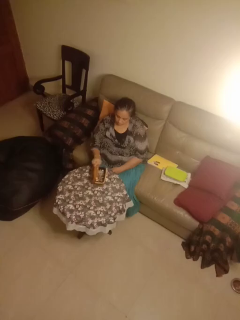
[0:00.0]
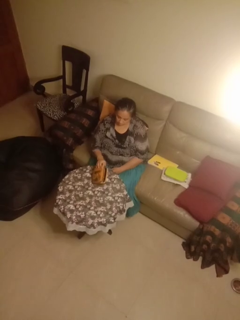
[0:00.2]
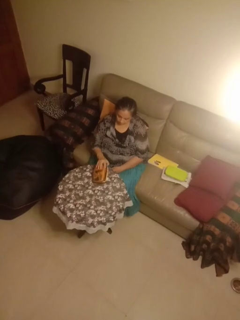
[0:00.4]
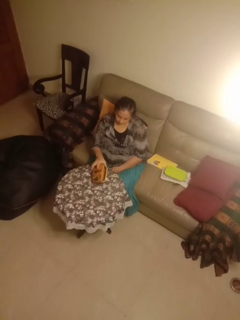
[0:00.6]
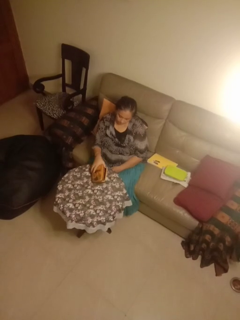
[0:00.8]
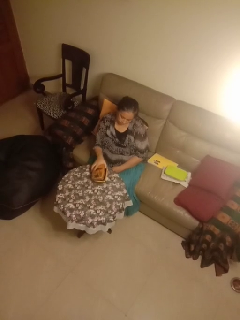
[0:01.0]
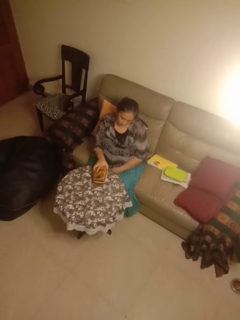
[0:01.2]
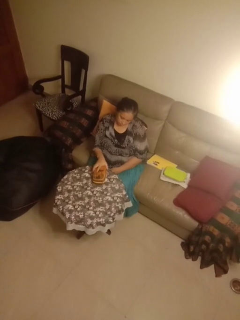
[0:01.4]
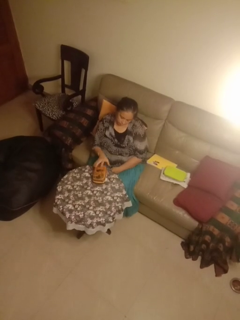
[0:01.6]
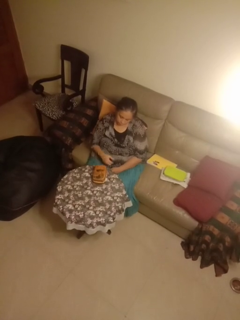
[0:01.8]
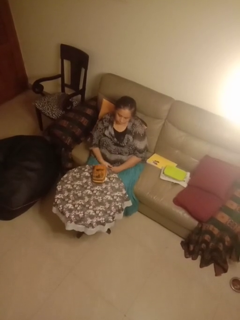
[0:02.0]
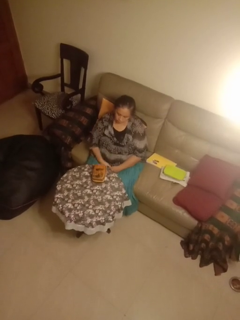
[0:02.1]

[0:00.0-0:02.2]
person closes jewelry box

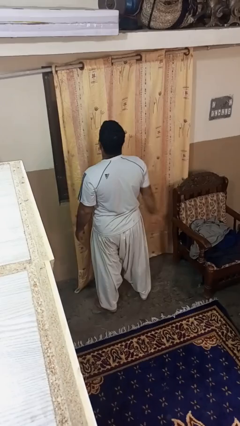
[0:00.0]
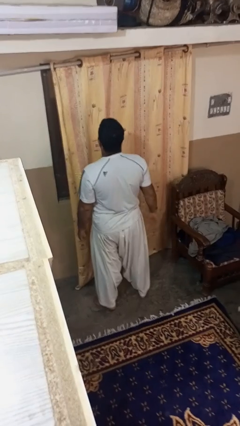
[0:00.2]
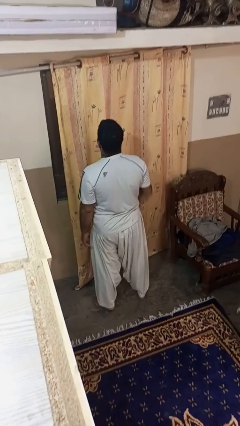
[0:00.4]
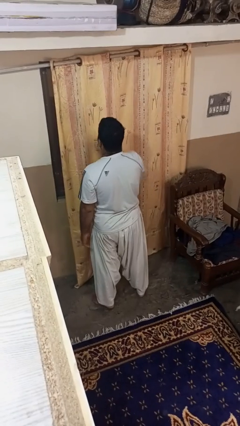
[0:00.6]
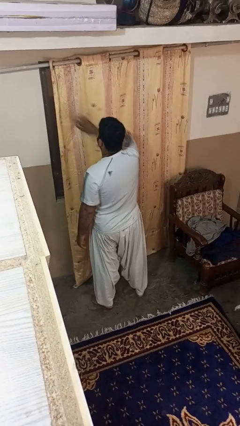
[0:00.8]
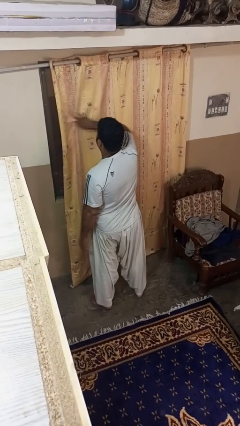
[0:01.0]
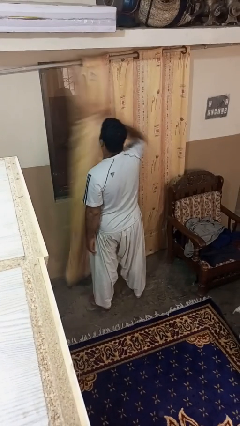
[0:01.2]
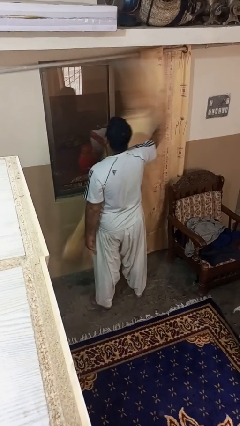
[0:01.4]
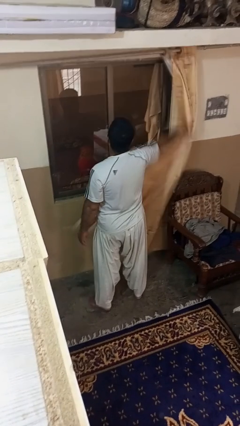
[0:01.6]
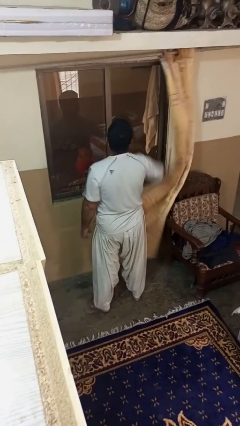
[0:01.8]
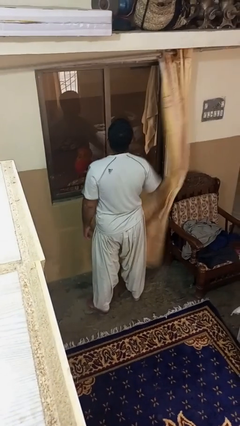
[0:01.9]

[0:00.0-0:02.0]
person opens curtains

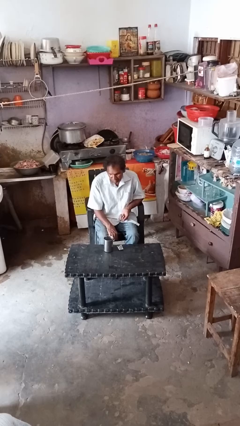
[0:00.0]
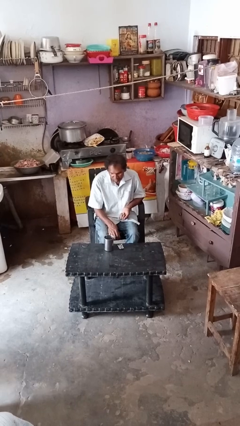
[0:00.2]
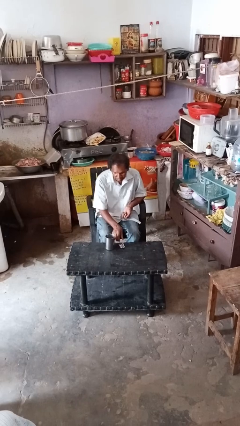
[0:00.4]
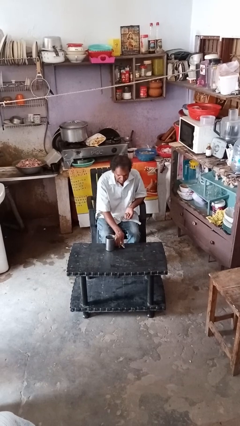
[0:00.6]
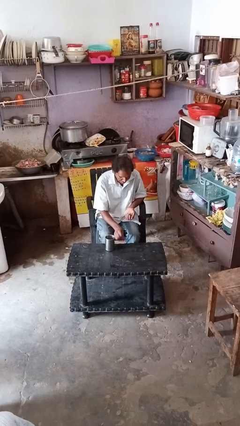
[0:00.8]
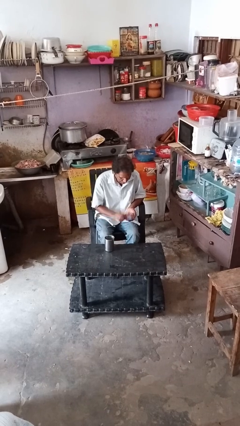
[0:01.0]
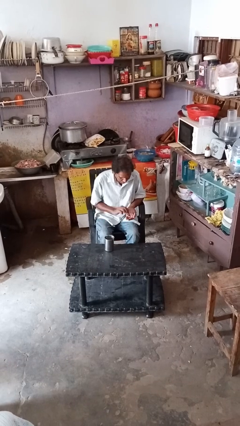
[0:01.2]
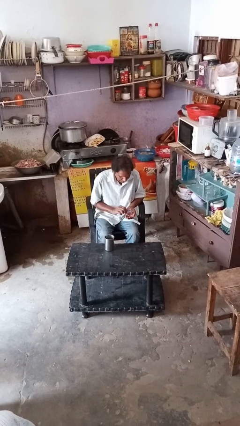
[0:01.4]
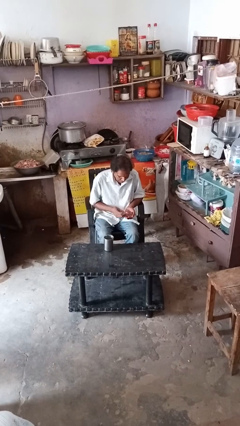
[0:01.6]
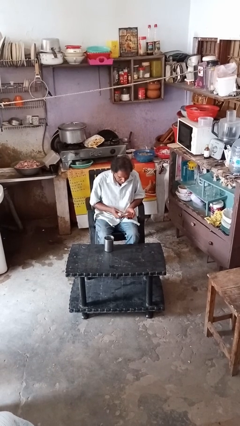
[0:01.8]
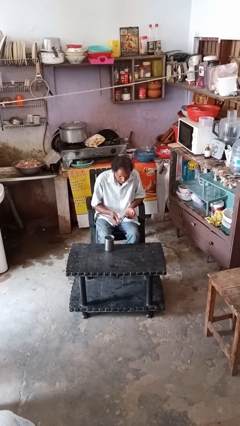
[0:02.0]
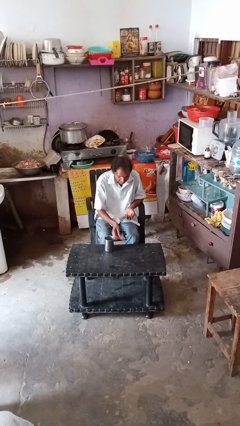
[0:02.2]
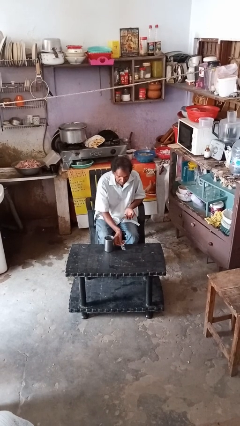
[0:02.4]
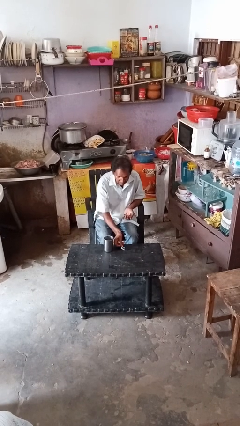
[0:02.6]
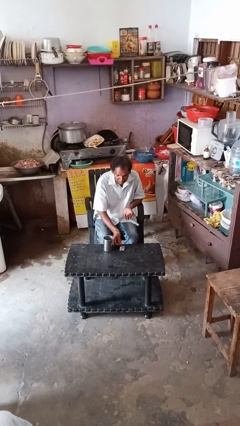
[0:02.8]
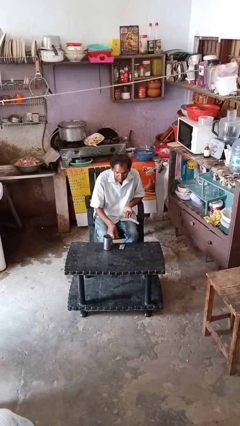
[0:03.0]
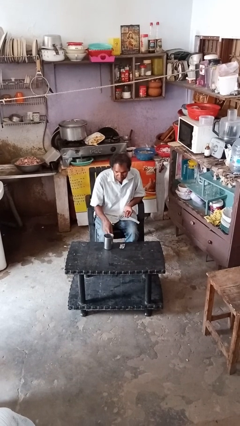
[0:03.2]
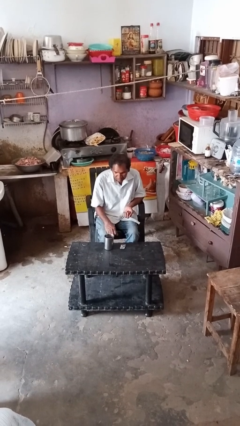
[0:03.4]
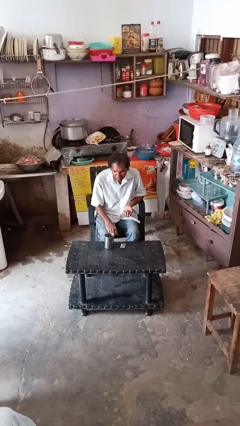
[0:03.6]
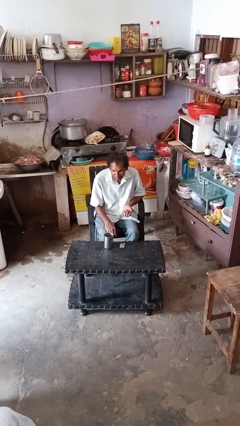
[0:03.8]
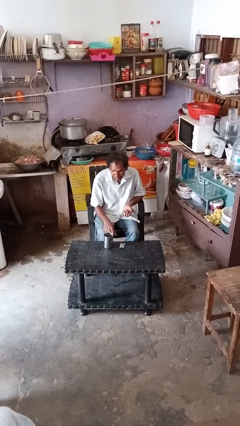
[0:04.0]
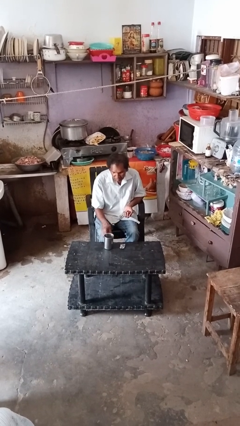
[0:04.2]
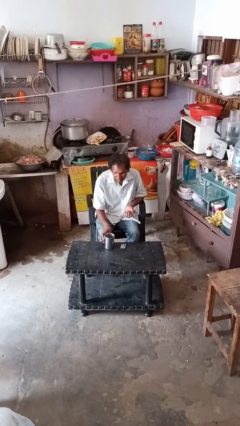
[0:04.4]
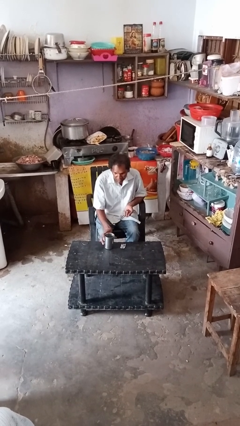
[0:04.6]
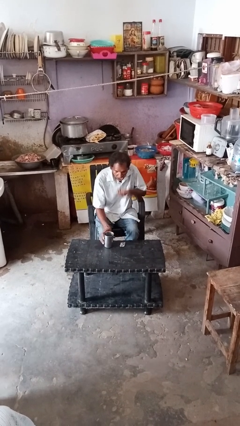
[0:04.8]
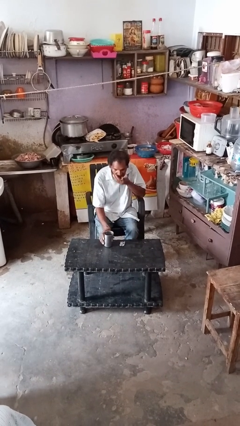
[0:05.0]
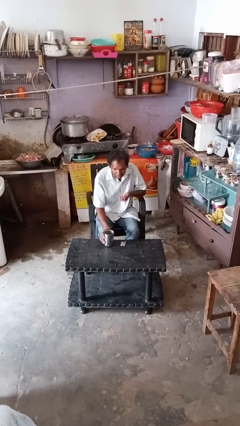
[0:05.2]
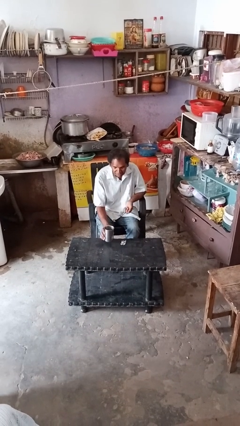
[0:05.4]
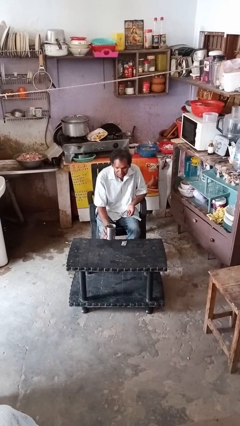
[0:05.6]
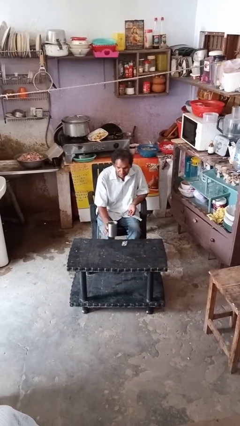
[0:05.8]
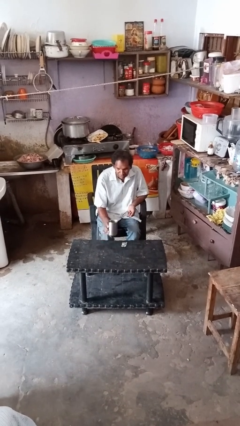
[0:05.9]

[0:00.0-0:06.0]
person takes medicine pills

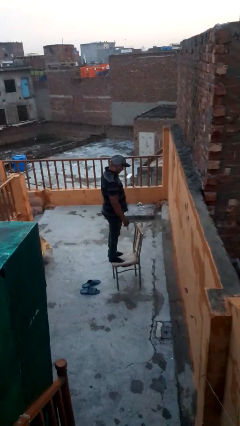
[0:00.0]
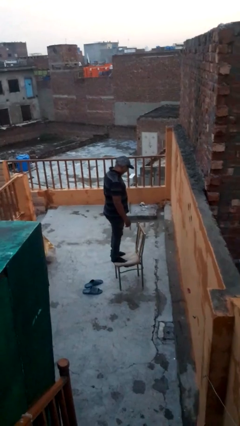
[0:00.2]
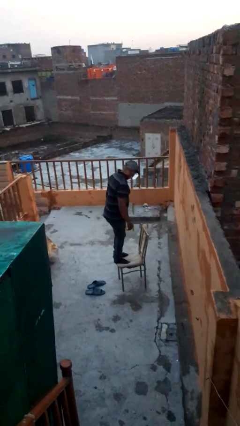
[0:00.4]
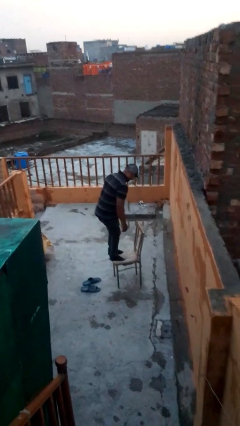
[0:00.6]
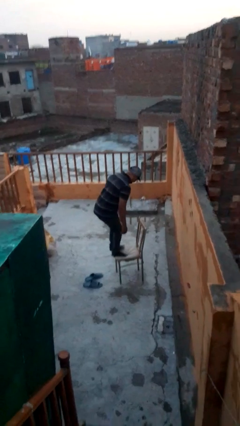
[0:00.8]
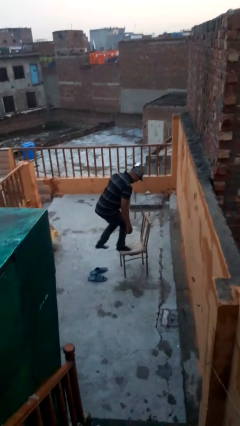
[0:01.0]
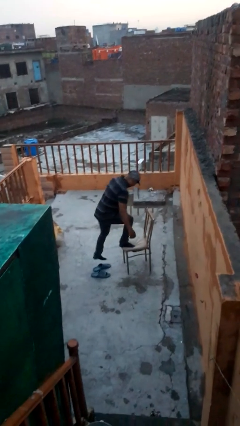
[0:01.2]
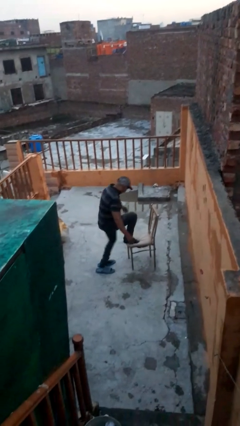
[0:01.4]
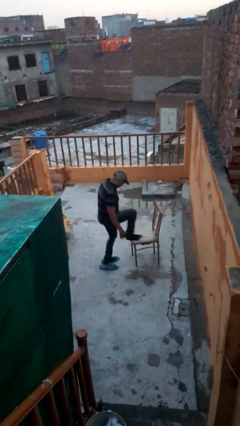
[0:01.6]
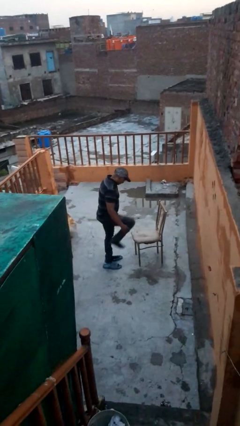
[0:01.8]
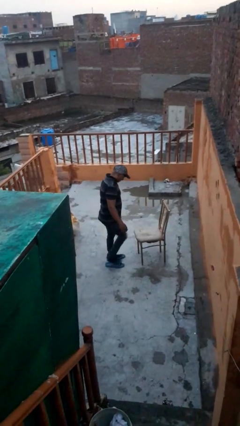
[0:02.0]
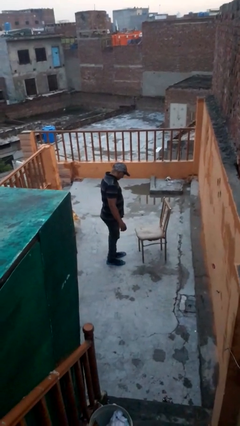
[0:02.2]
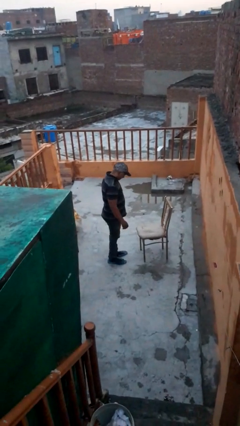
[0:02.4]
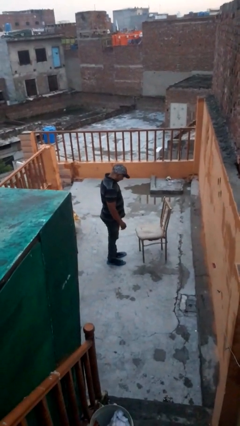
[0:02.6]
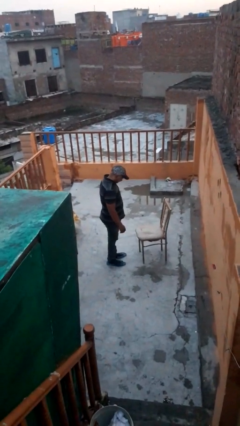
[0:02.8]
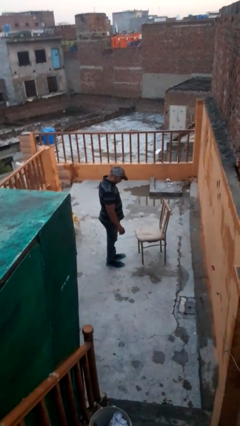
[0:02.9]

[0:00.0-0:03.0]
person climbs off chair

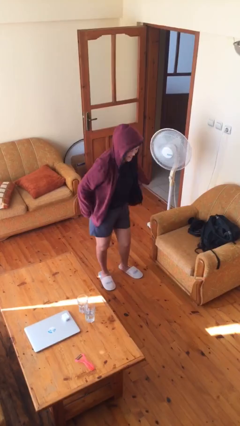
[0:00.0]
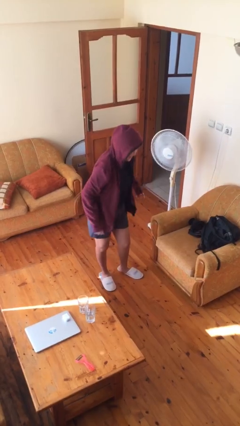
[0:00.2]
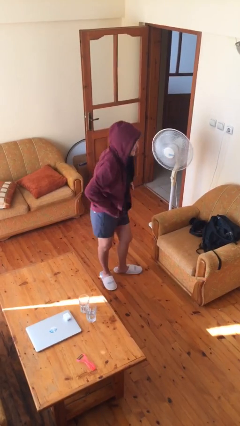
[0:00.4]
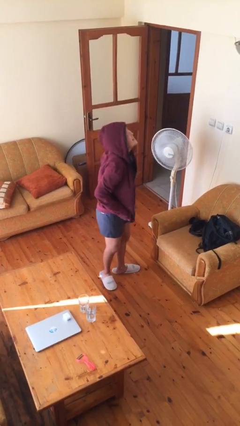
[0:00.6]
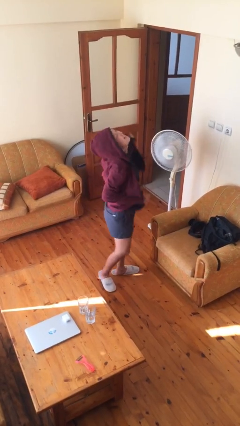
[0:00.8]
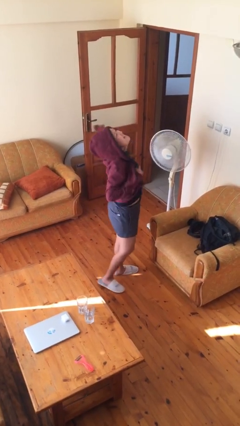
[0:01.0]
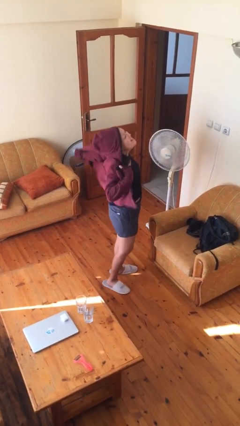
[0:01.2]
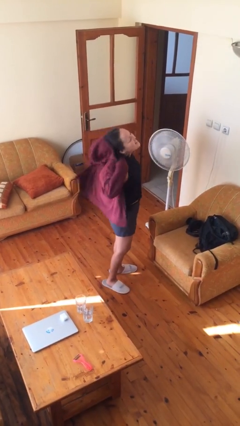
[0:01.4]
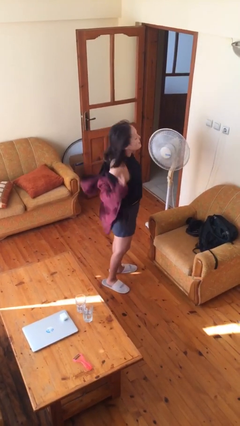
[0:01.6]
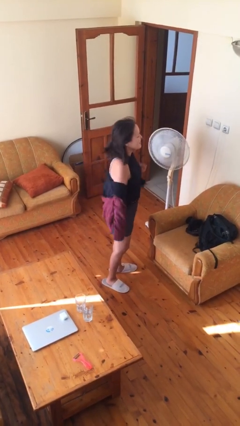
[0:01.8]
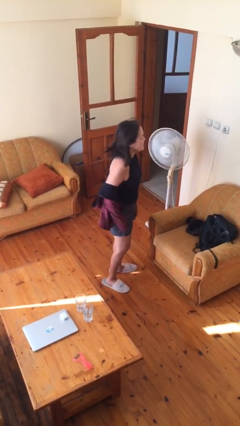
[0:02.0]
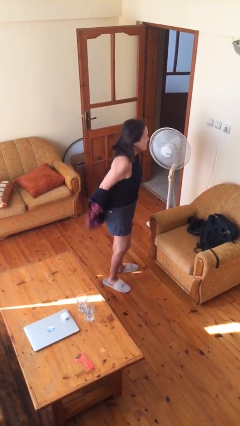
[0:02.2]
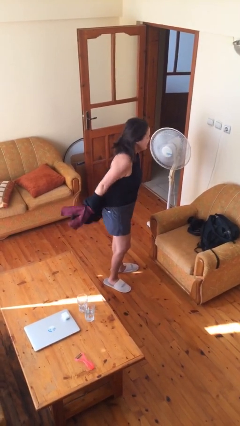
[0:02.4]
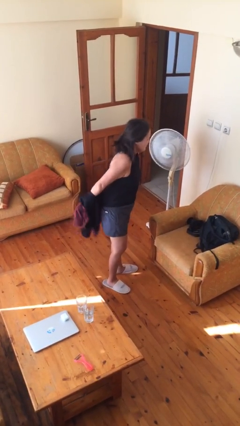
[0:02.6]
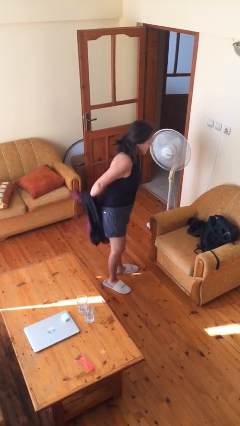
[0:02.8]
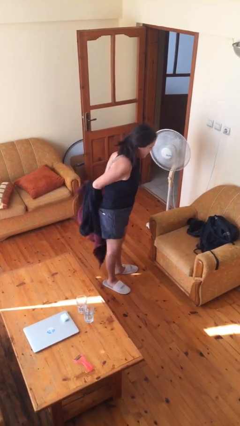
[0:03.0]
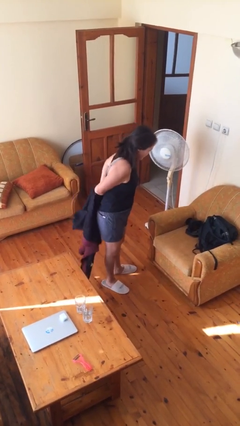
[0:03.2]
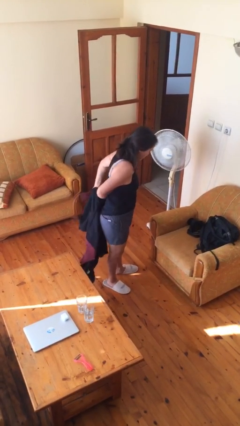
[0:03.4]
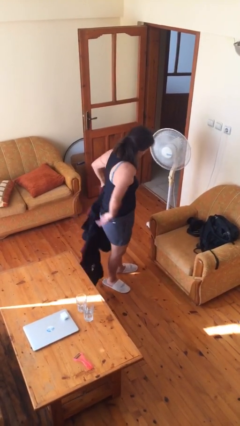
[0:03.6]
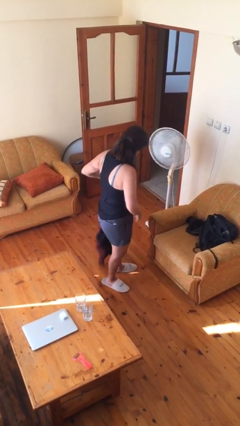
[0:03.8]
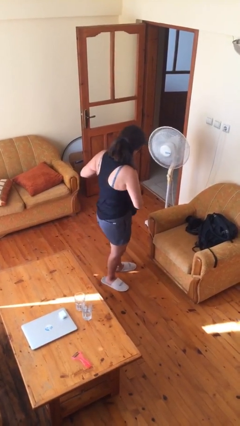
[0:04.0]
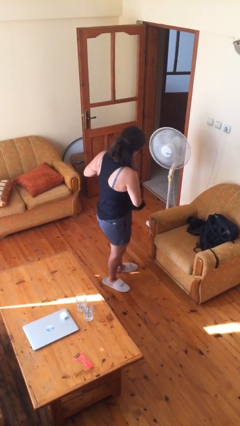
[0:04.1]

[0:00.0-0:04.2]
person takes off hoodie

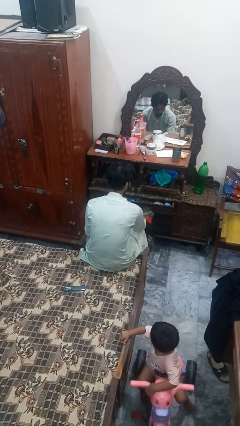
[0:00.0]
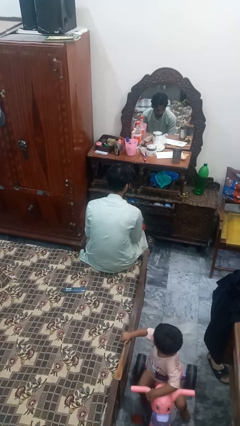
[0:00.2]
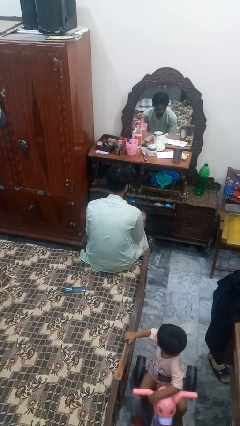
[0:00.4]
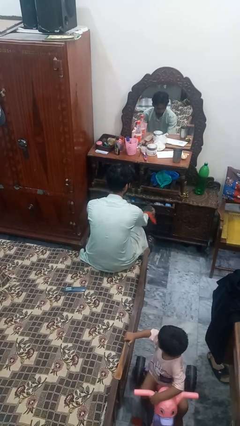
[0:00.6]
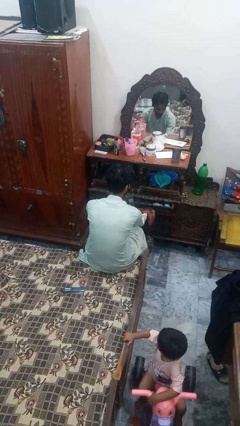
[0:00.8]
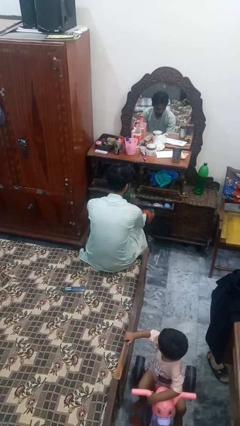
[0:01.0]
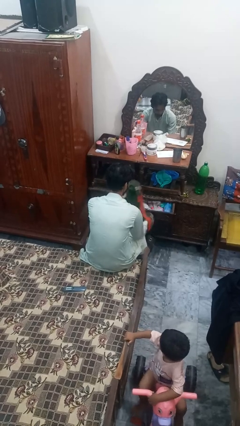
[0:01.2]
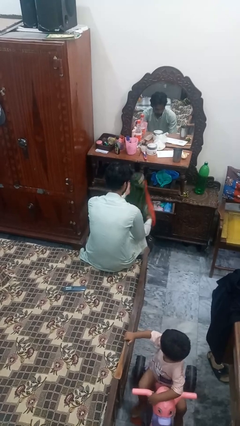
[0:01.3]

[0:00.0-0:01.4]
person puts clothes into dresser
